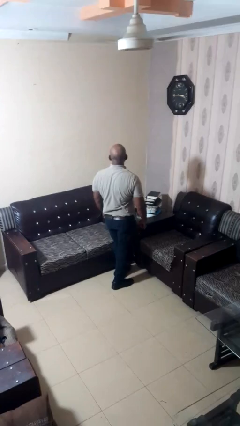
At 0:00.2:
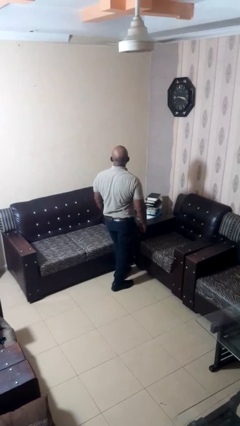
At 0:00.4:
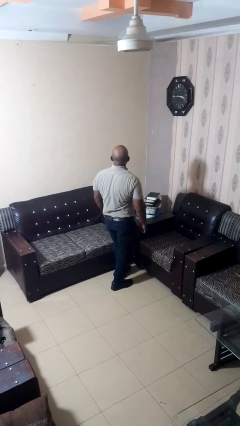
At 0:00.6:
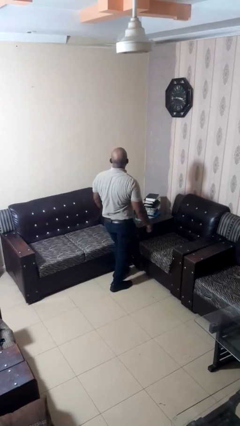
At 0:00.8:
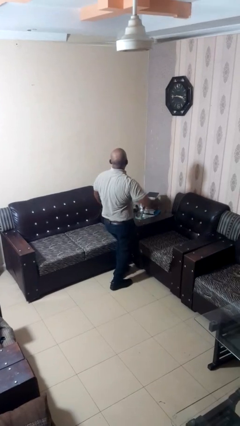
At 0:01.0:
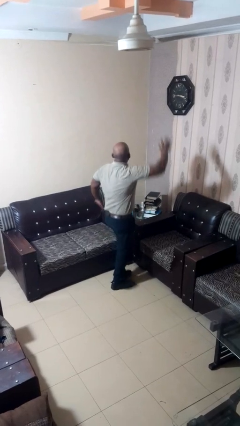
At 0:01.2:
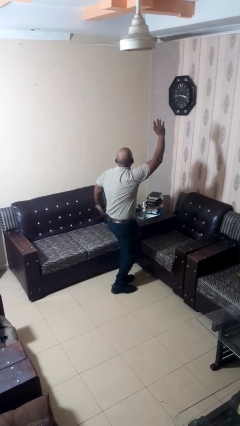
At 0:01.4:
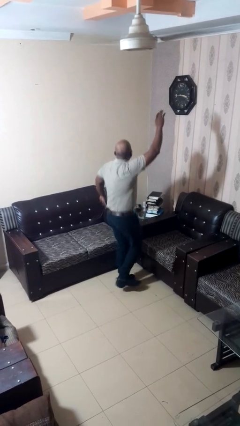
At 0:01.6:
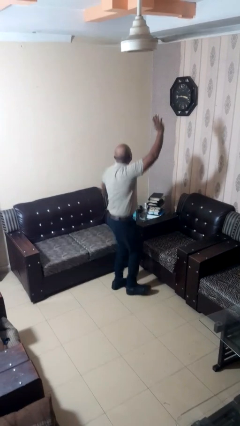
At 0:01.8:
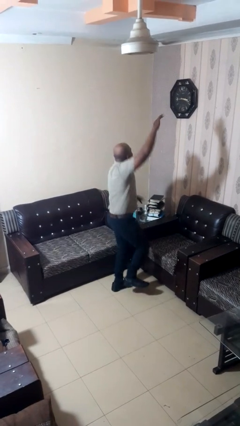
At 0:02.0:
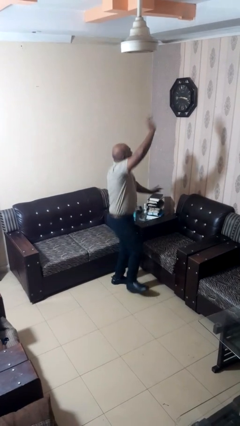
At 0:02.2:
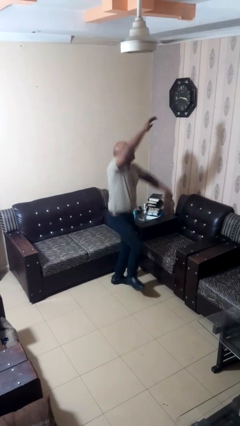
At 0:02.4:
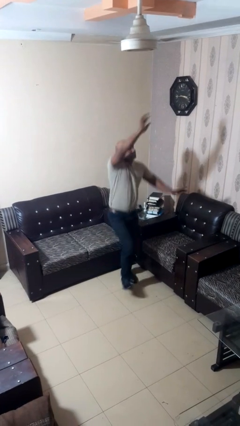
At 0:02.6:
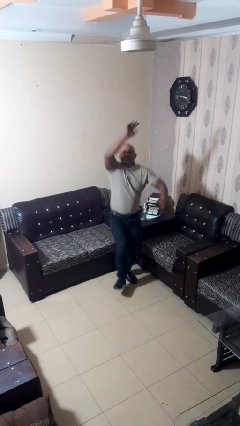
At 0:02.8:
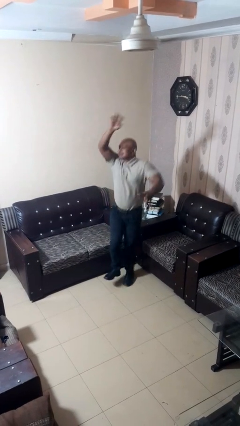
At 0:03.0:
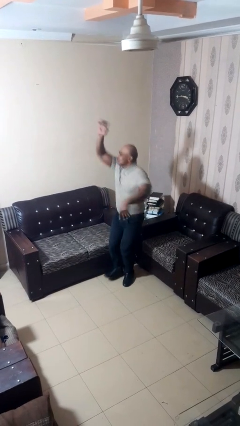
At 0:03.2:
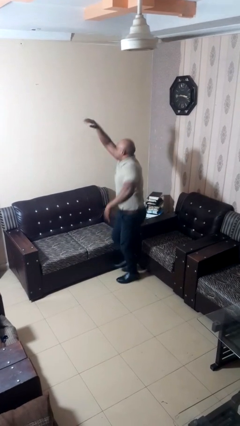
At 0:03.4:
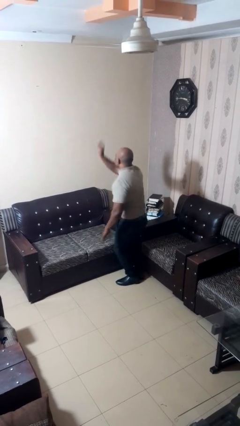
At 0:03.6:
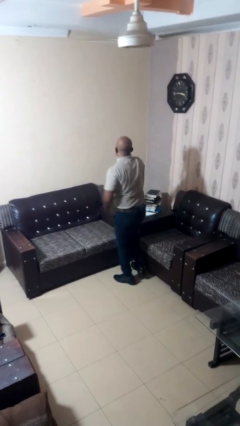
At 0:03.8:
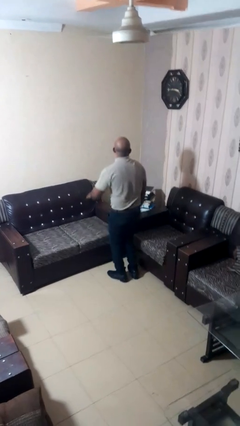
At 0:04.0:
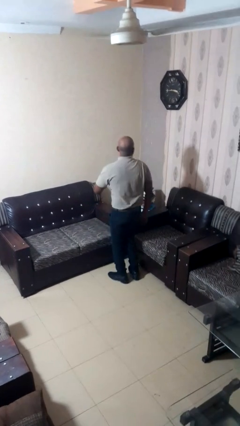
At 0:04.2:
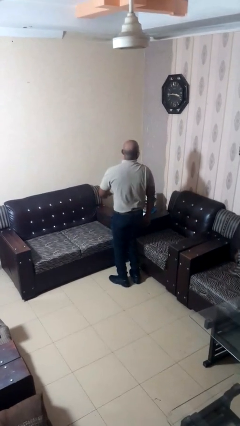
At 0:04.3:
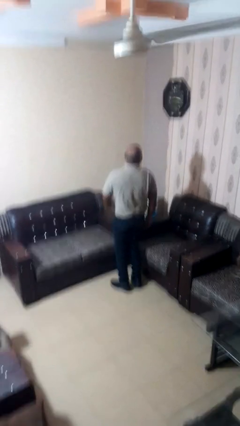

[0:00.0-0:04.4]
person dances in place

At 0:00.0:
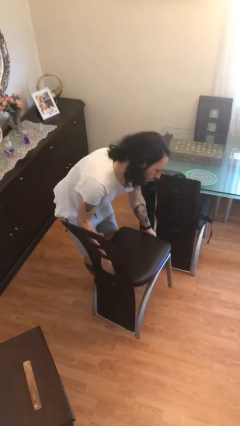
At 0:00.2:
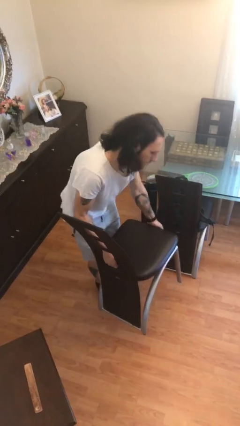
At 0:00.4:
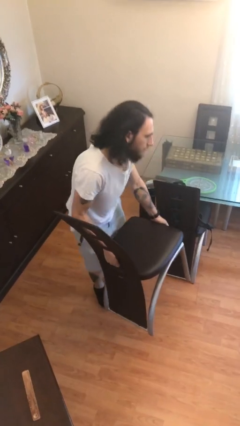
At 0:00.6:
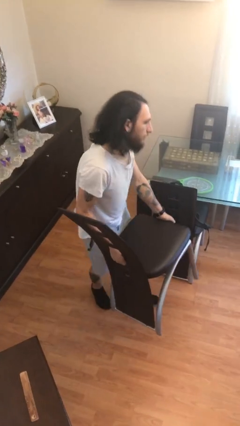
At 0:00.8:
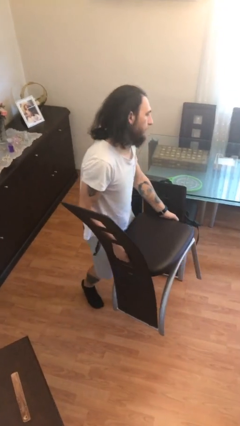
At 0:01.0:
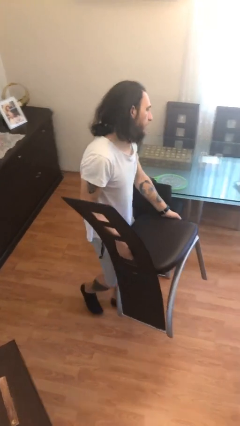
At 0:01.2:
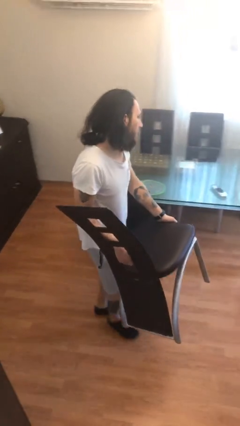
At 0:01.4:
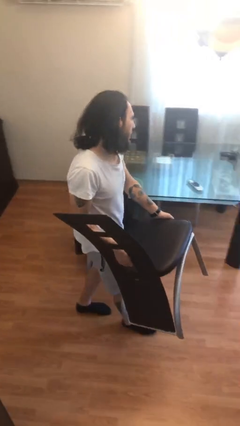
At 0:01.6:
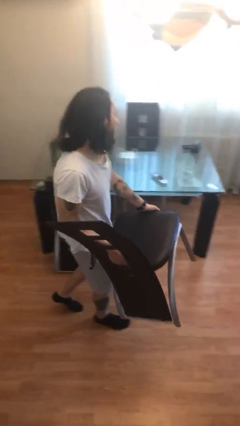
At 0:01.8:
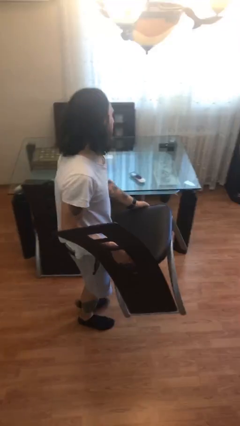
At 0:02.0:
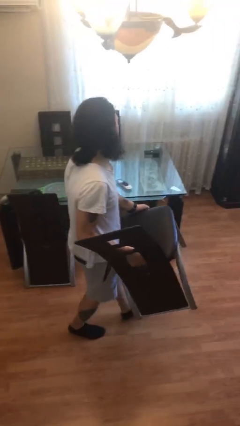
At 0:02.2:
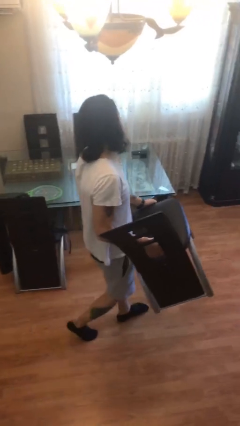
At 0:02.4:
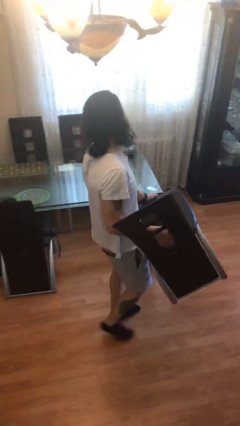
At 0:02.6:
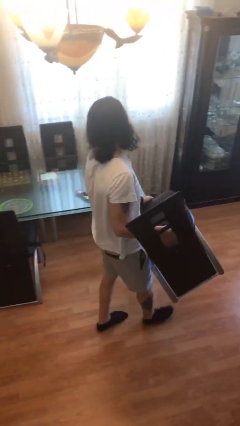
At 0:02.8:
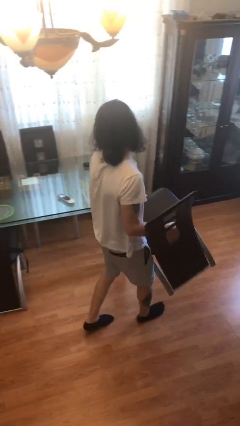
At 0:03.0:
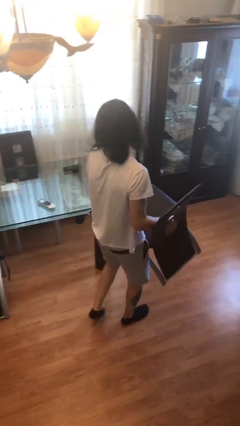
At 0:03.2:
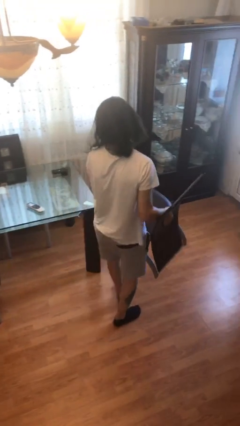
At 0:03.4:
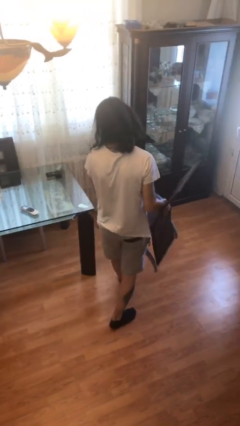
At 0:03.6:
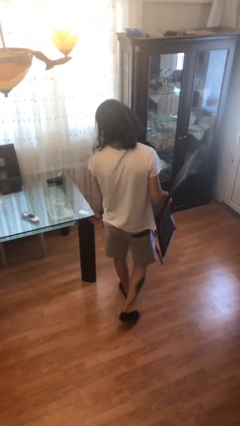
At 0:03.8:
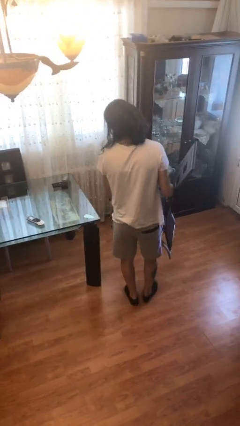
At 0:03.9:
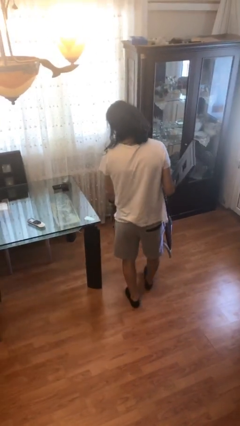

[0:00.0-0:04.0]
person carries heavy object

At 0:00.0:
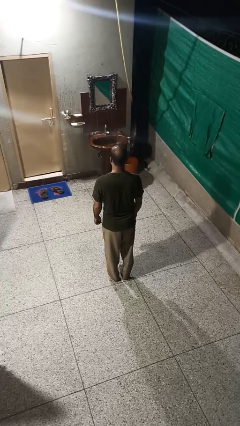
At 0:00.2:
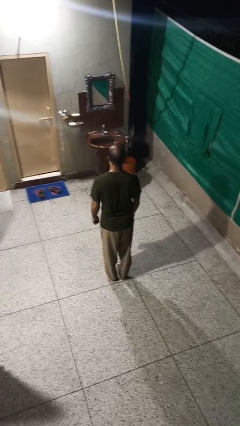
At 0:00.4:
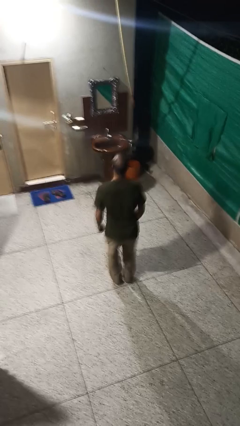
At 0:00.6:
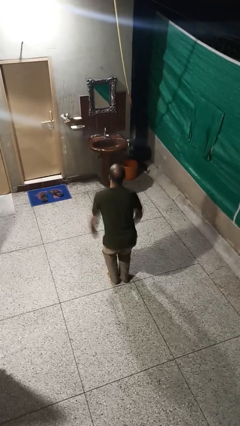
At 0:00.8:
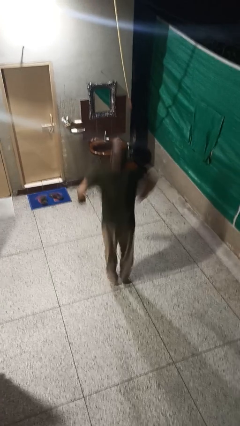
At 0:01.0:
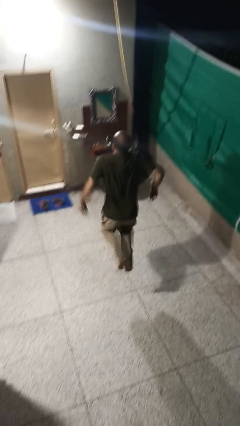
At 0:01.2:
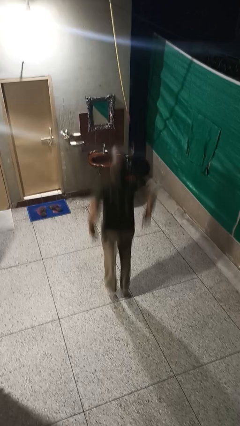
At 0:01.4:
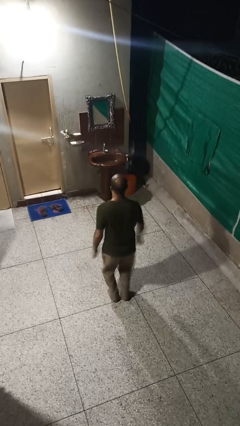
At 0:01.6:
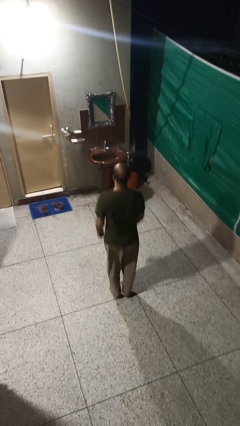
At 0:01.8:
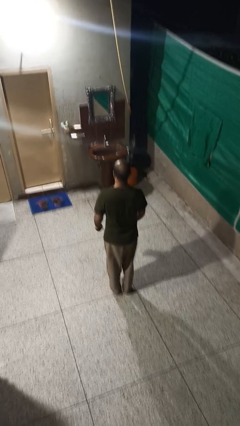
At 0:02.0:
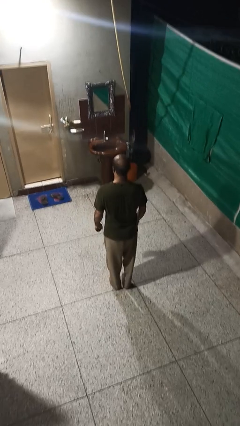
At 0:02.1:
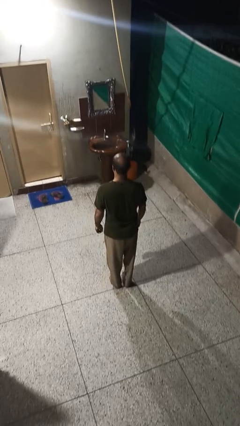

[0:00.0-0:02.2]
person jumps

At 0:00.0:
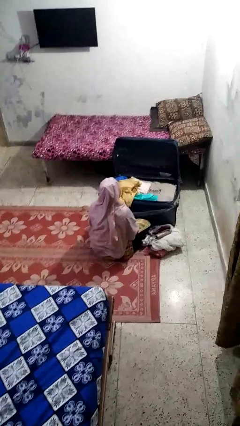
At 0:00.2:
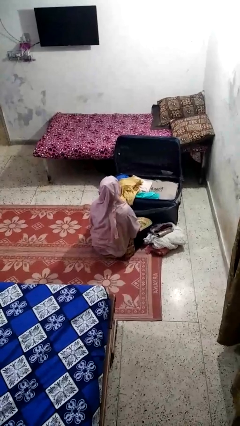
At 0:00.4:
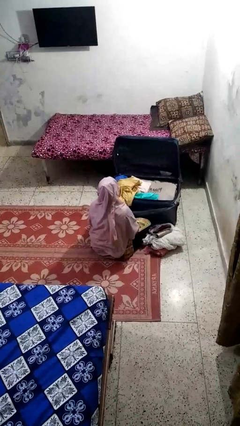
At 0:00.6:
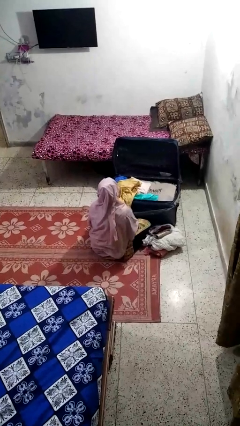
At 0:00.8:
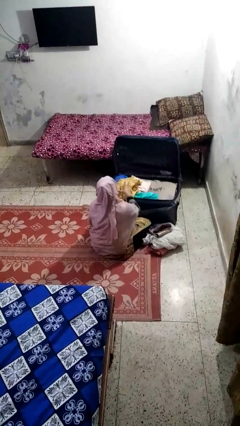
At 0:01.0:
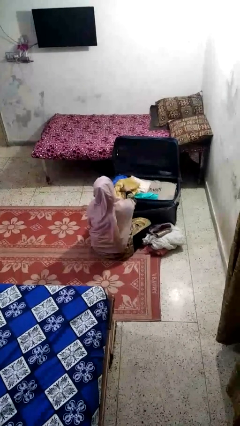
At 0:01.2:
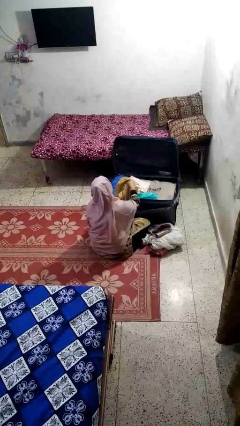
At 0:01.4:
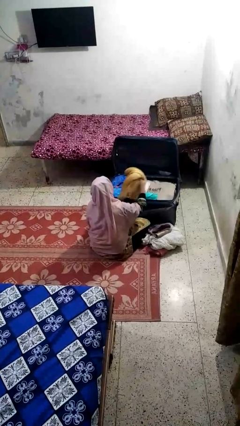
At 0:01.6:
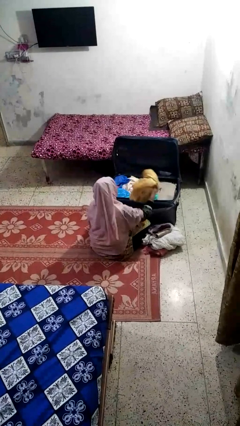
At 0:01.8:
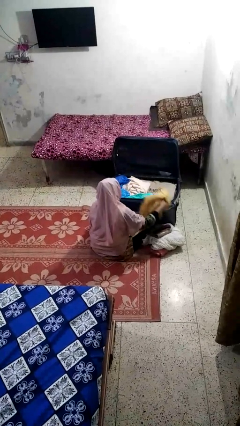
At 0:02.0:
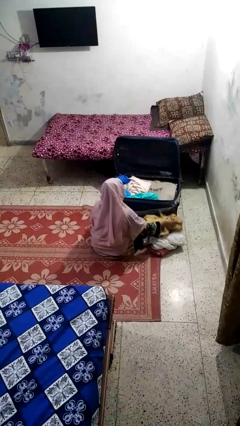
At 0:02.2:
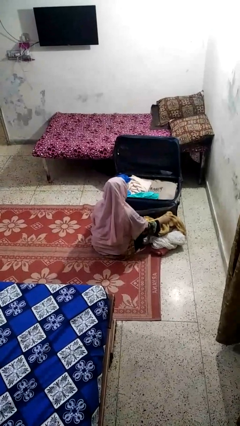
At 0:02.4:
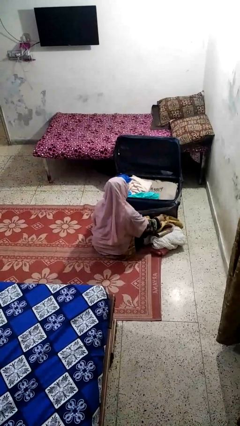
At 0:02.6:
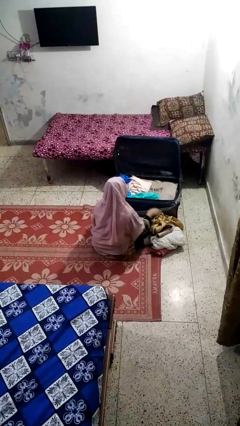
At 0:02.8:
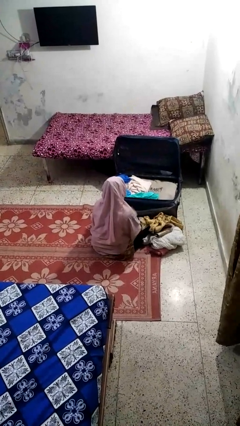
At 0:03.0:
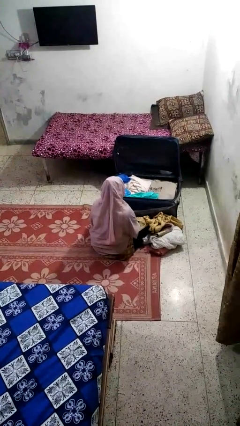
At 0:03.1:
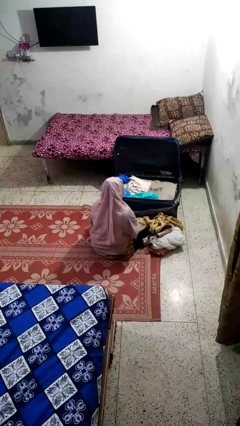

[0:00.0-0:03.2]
person unloads clothes from suitcase

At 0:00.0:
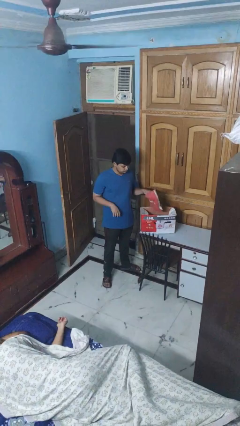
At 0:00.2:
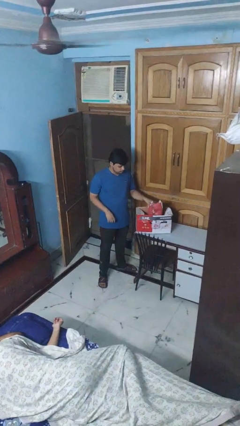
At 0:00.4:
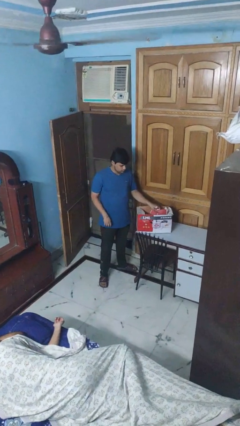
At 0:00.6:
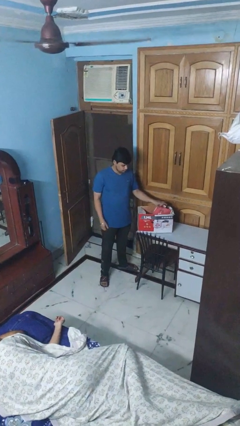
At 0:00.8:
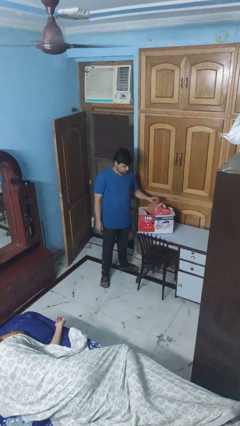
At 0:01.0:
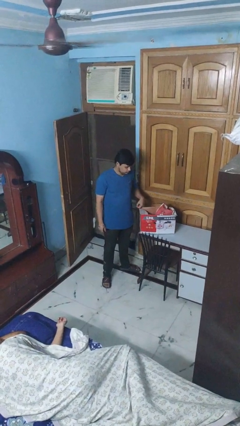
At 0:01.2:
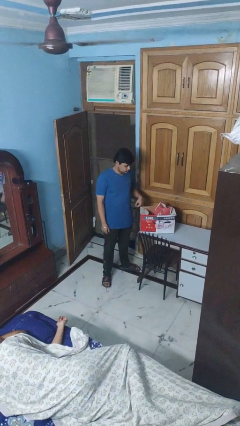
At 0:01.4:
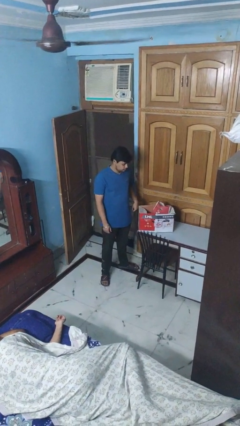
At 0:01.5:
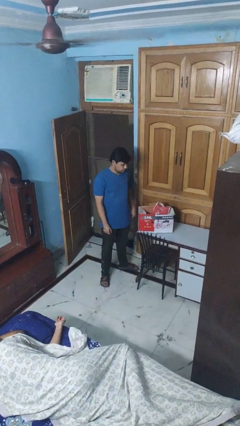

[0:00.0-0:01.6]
person puts object into box

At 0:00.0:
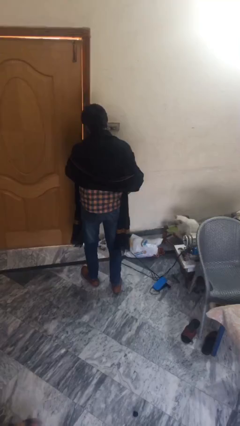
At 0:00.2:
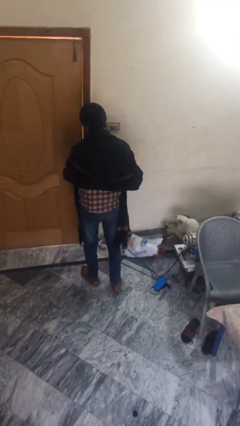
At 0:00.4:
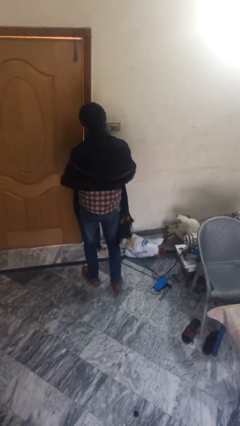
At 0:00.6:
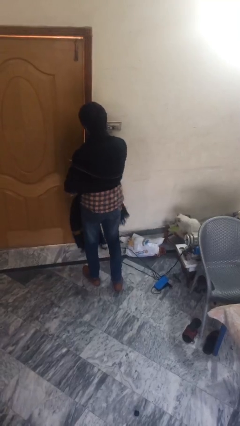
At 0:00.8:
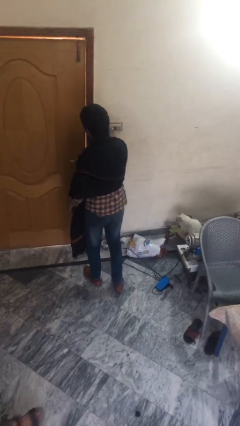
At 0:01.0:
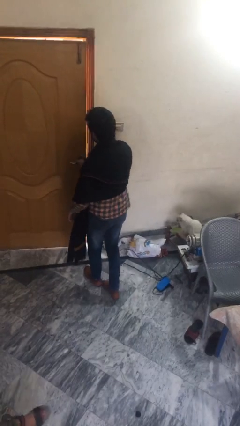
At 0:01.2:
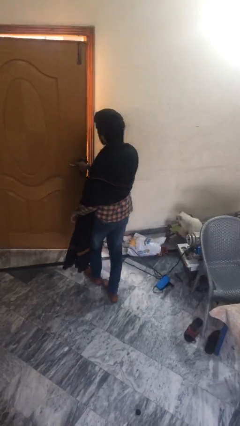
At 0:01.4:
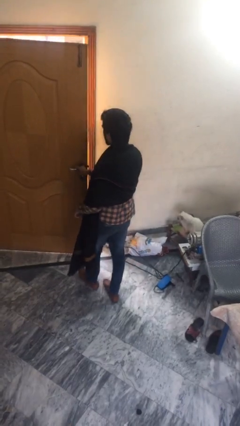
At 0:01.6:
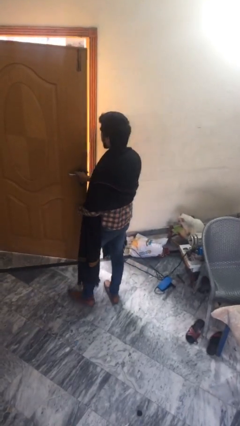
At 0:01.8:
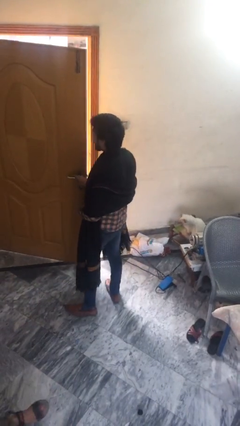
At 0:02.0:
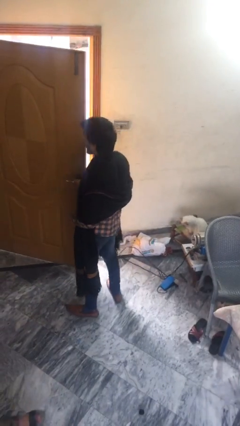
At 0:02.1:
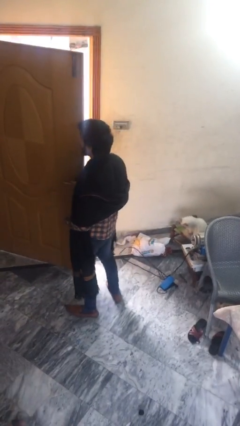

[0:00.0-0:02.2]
person opens facility door
